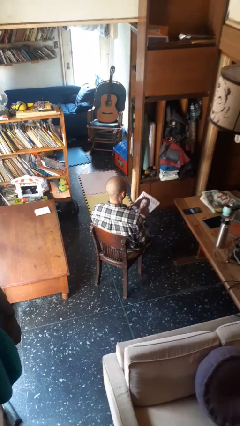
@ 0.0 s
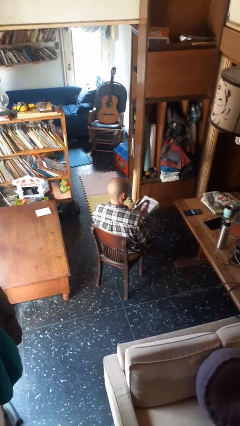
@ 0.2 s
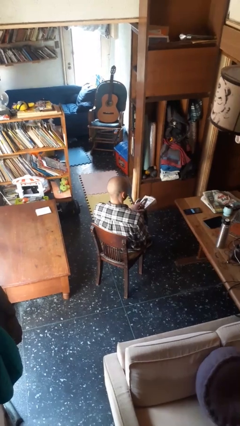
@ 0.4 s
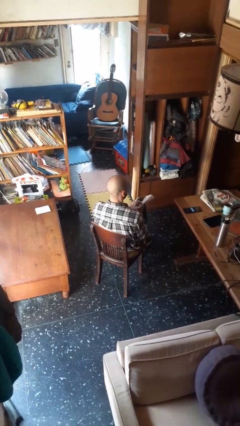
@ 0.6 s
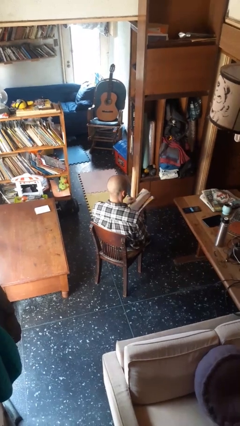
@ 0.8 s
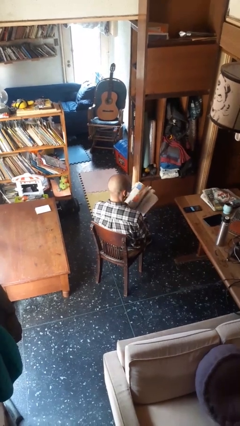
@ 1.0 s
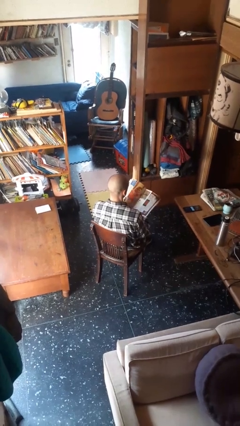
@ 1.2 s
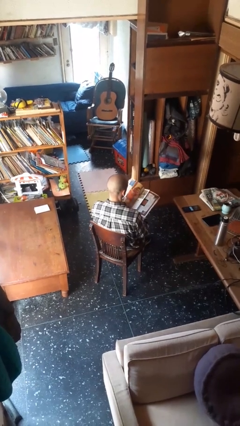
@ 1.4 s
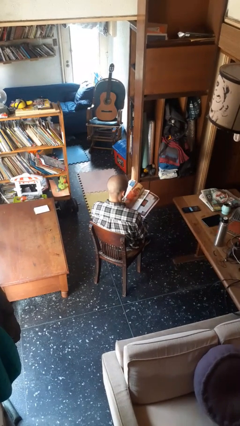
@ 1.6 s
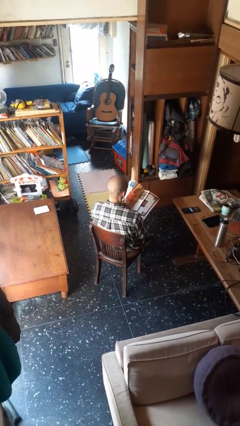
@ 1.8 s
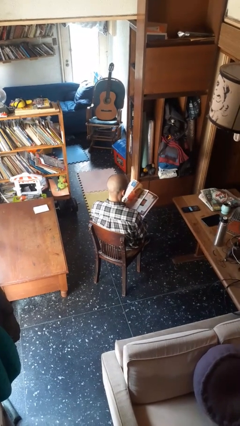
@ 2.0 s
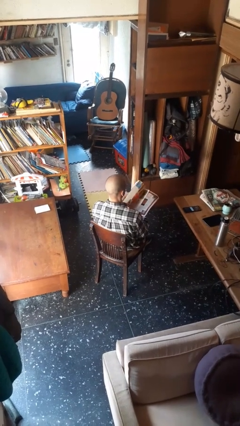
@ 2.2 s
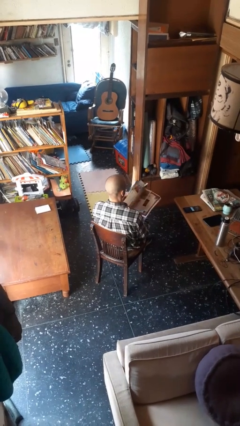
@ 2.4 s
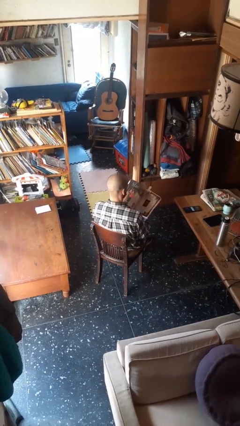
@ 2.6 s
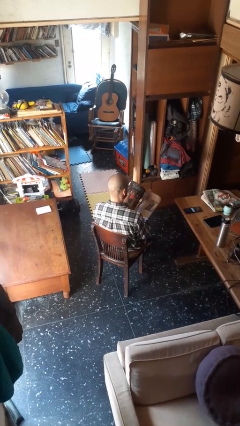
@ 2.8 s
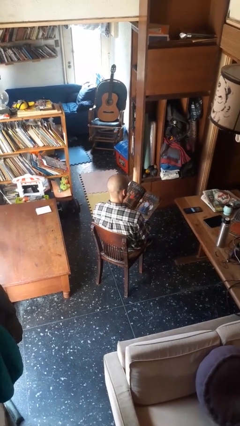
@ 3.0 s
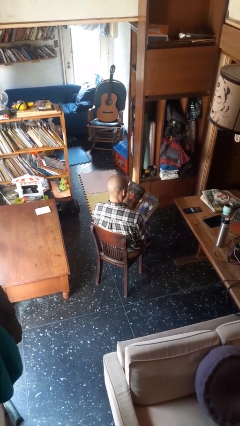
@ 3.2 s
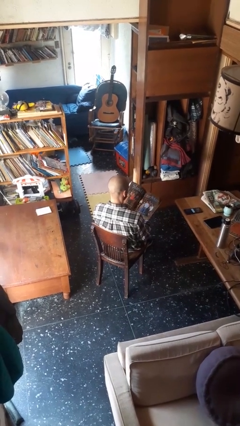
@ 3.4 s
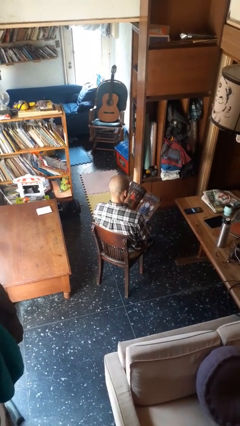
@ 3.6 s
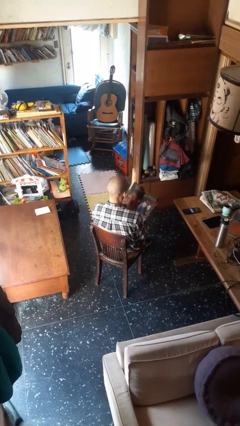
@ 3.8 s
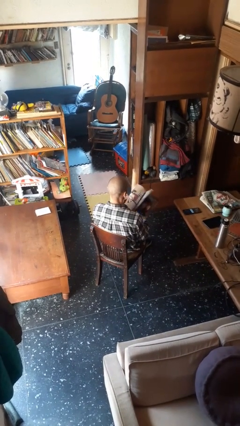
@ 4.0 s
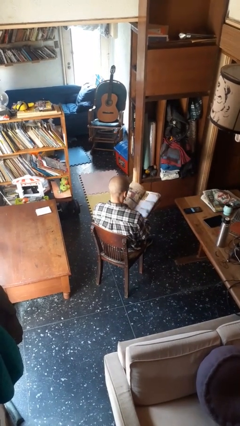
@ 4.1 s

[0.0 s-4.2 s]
person reads magazine

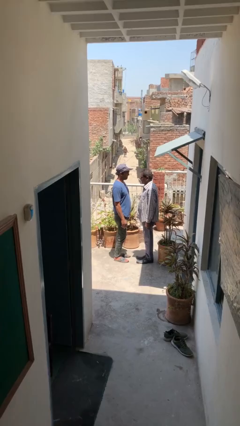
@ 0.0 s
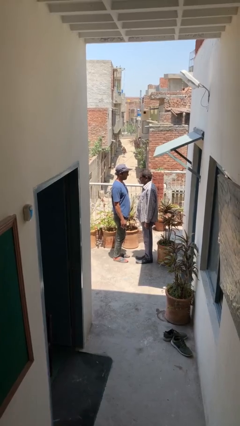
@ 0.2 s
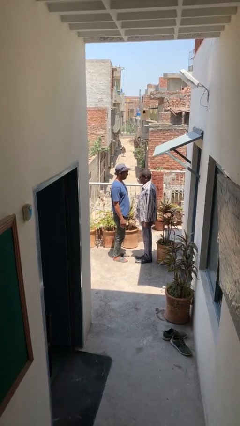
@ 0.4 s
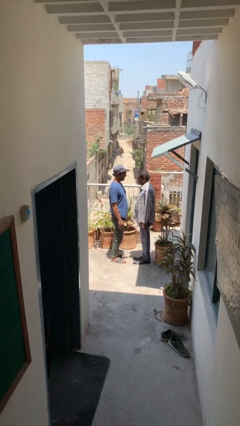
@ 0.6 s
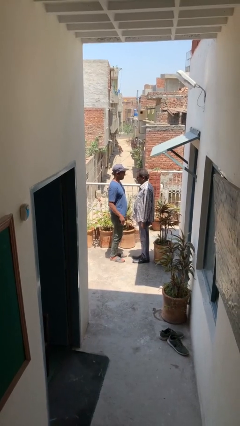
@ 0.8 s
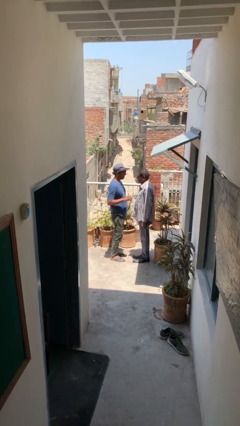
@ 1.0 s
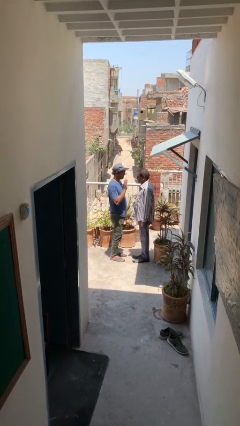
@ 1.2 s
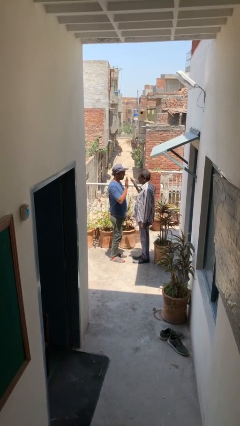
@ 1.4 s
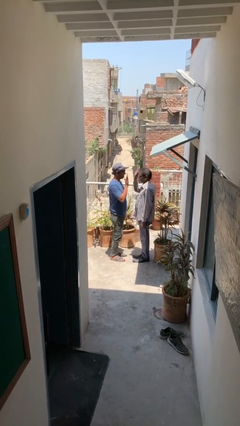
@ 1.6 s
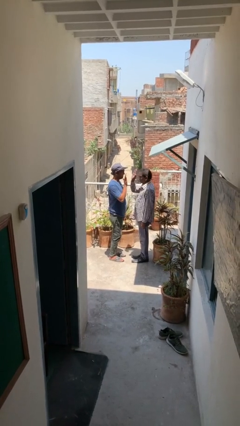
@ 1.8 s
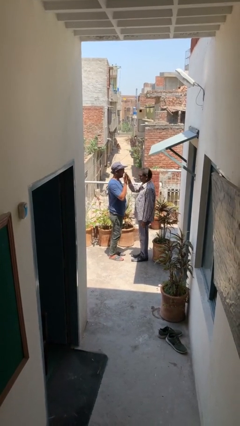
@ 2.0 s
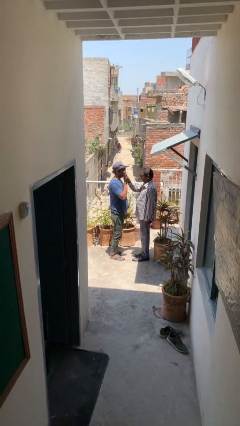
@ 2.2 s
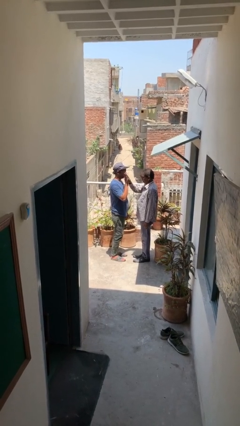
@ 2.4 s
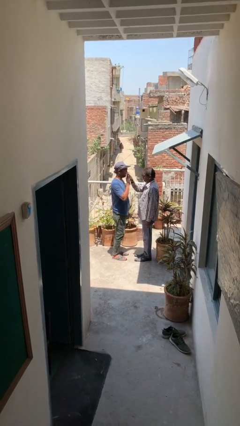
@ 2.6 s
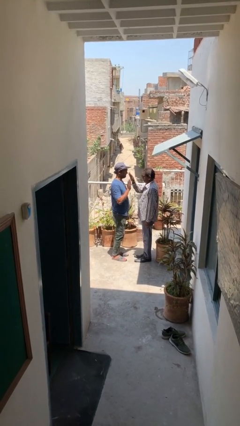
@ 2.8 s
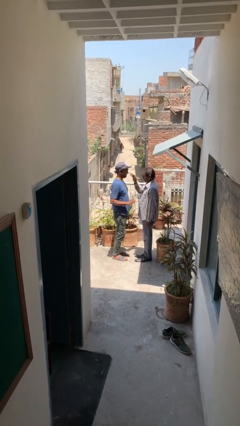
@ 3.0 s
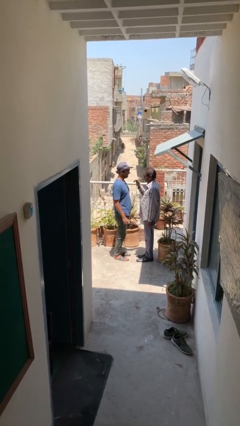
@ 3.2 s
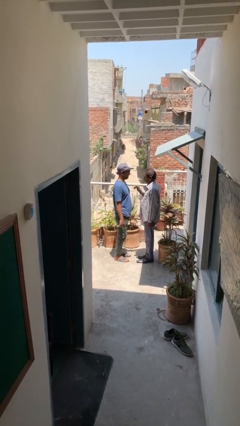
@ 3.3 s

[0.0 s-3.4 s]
person highfives hand

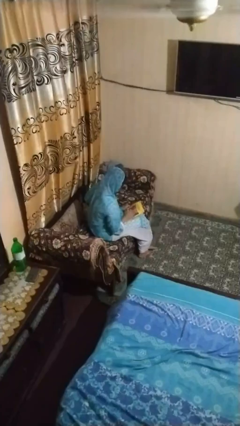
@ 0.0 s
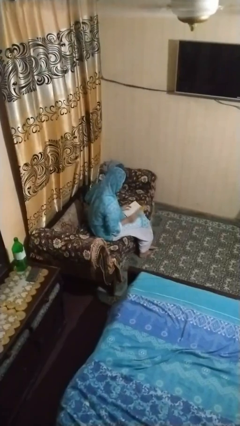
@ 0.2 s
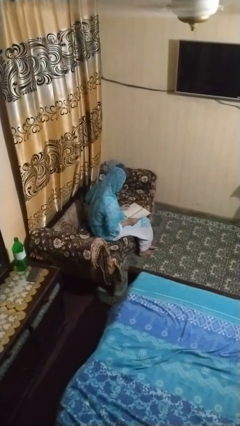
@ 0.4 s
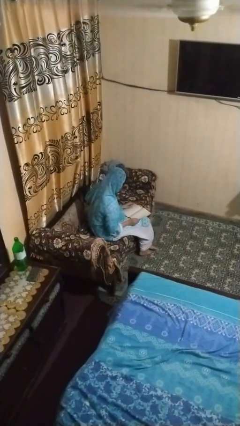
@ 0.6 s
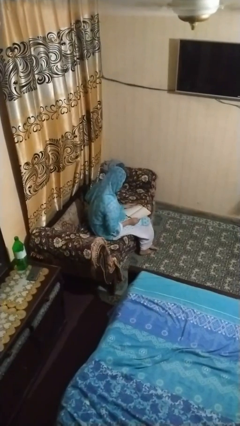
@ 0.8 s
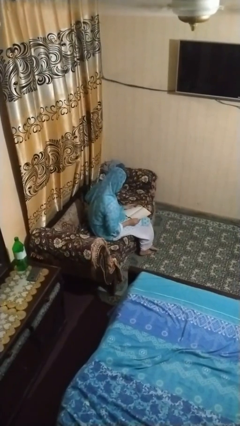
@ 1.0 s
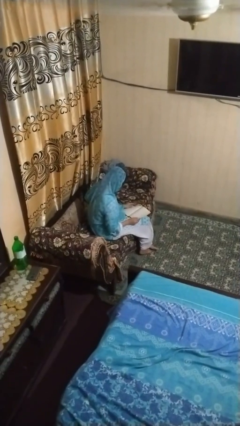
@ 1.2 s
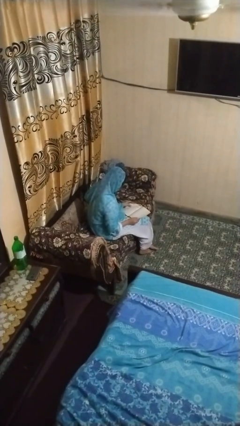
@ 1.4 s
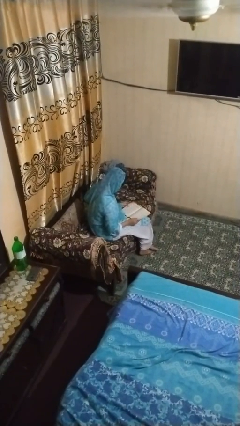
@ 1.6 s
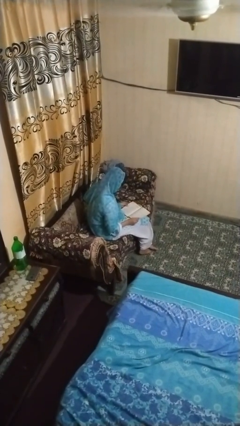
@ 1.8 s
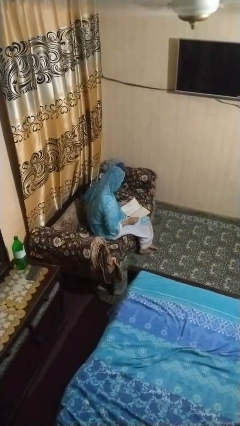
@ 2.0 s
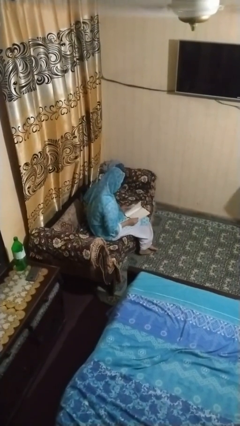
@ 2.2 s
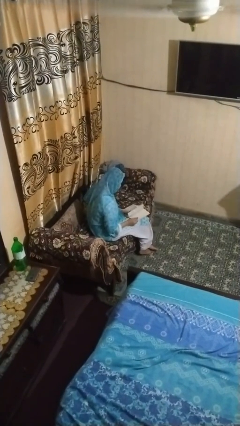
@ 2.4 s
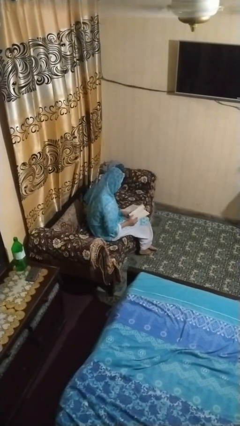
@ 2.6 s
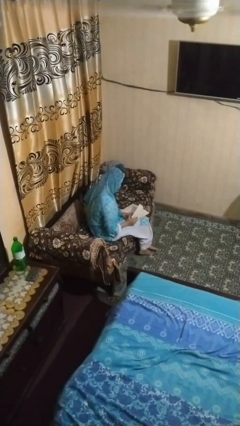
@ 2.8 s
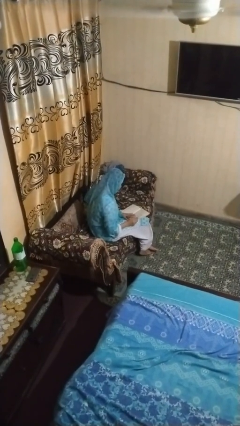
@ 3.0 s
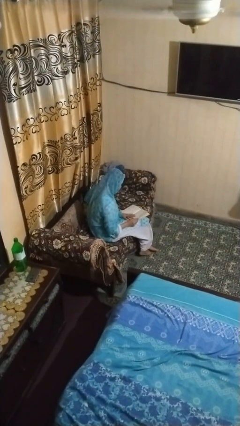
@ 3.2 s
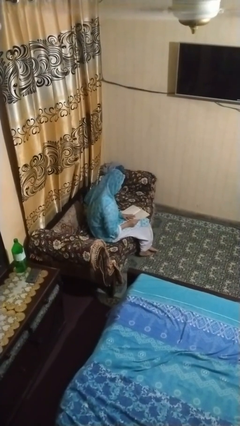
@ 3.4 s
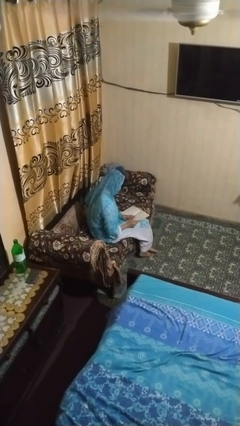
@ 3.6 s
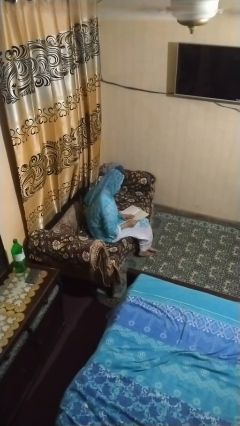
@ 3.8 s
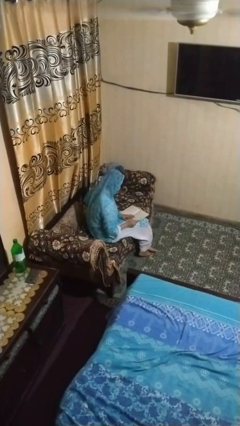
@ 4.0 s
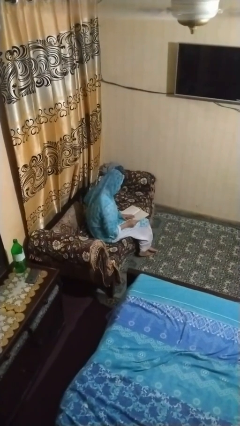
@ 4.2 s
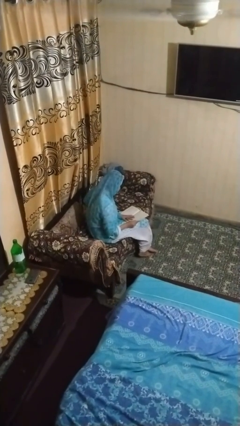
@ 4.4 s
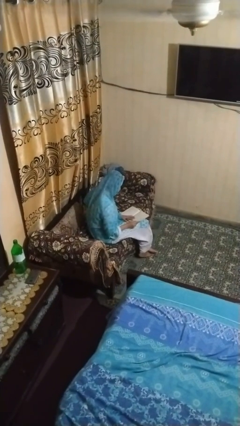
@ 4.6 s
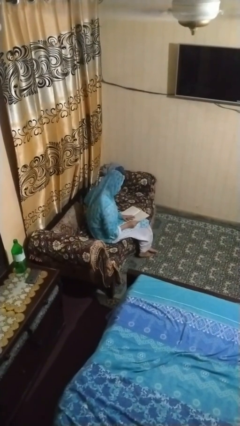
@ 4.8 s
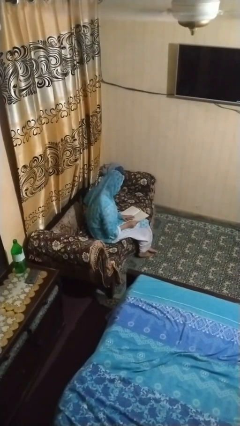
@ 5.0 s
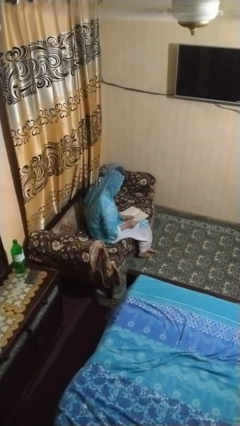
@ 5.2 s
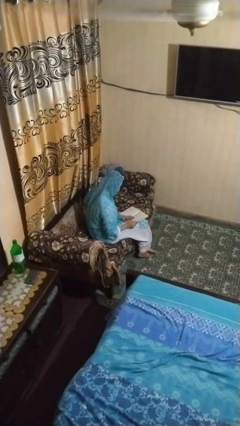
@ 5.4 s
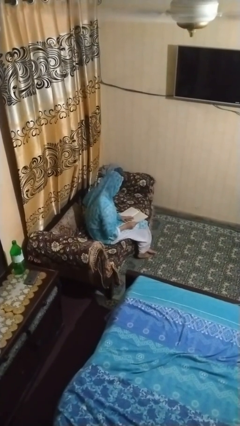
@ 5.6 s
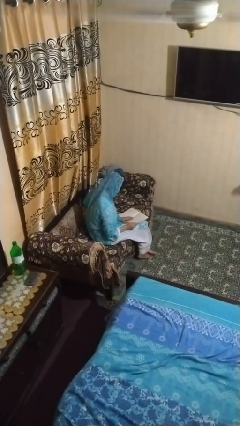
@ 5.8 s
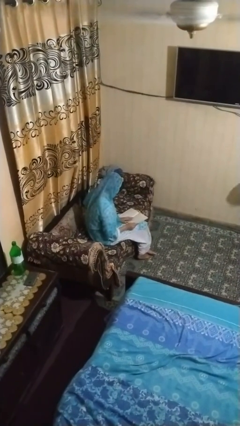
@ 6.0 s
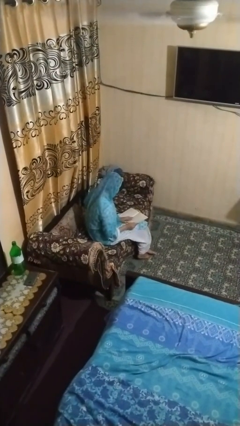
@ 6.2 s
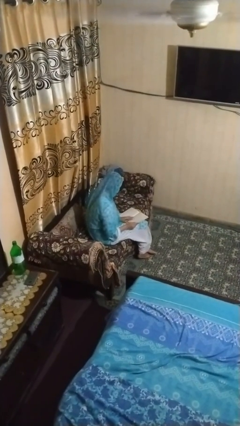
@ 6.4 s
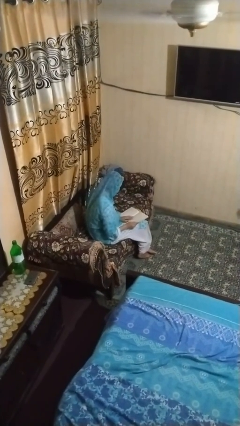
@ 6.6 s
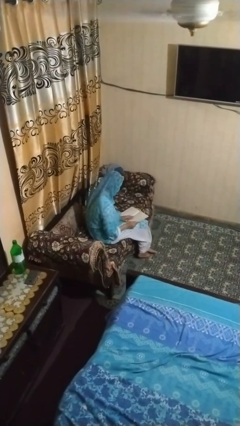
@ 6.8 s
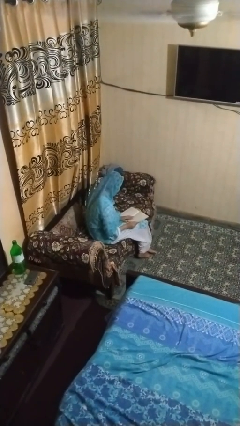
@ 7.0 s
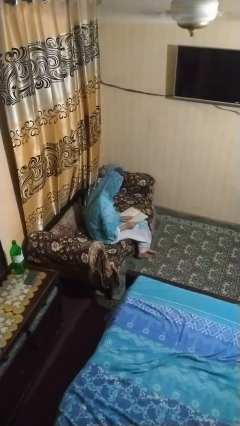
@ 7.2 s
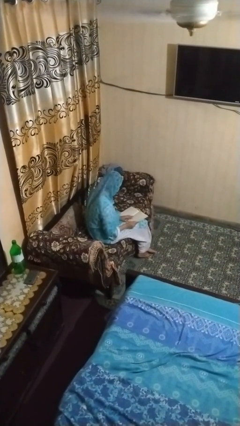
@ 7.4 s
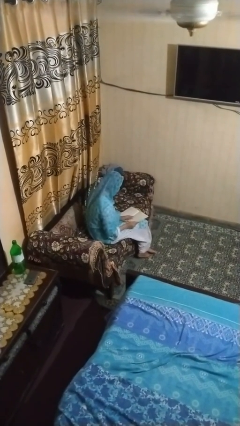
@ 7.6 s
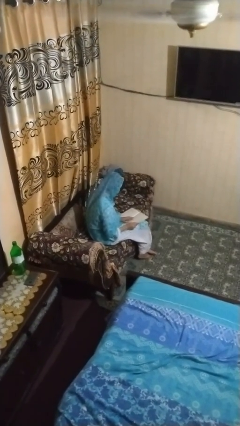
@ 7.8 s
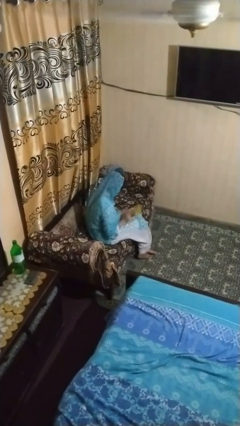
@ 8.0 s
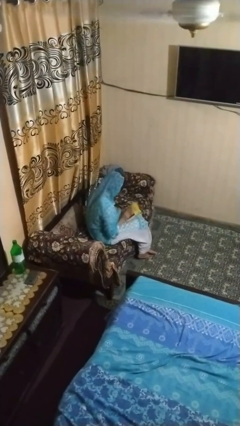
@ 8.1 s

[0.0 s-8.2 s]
person reads book

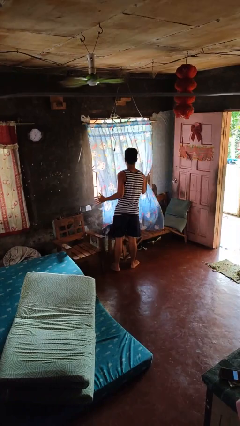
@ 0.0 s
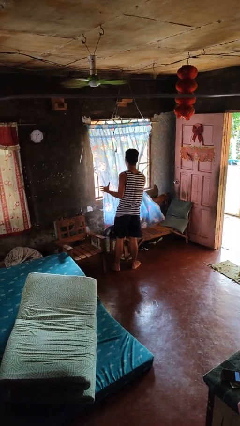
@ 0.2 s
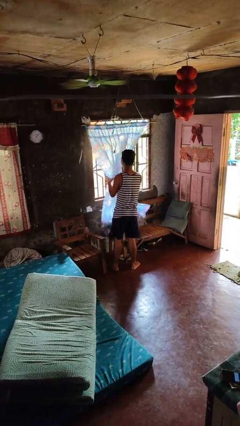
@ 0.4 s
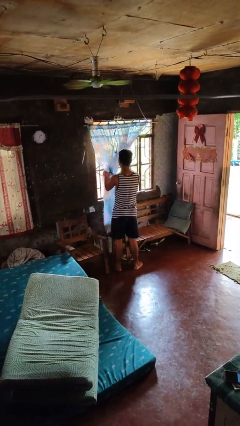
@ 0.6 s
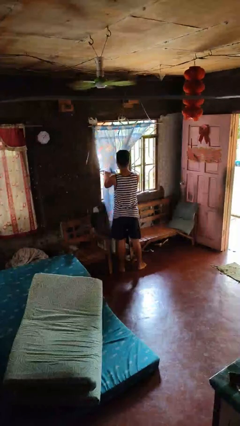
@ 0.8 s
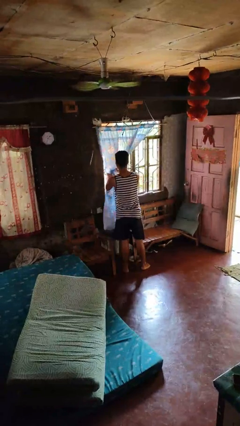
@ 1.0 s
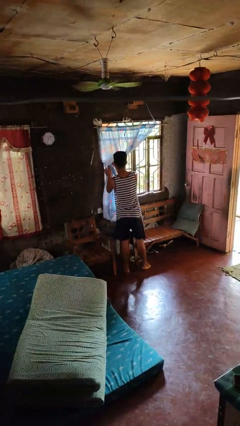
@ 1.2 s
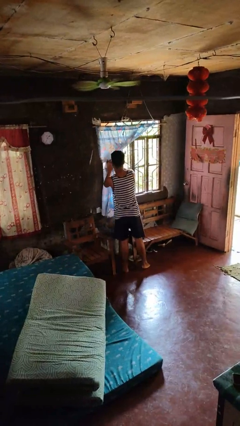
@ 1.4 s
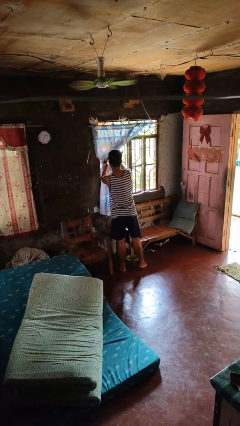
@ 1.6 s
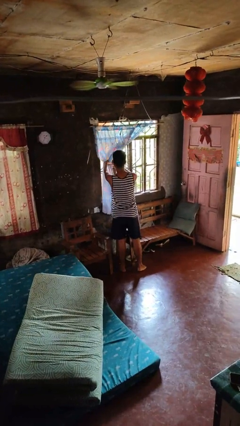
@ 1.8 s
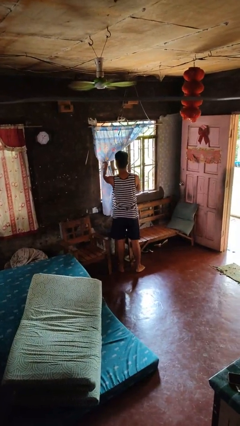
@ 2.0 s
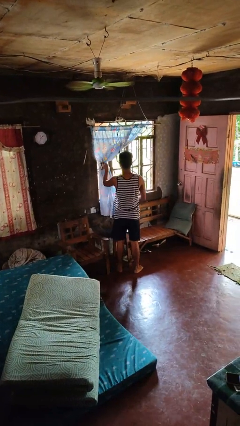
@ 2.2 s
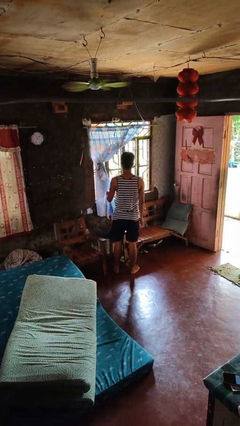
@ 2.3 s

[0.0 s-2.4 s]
person opens curtains
